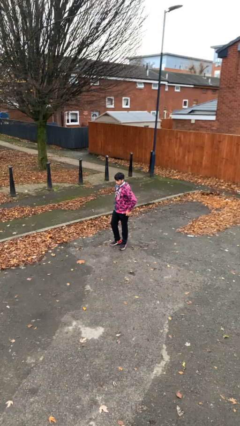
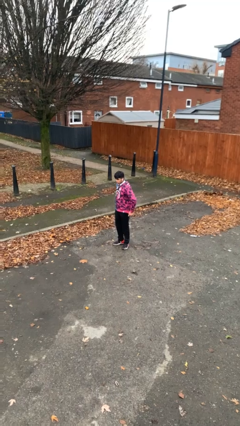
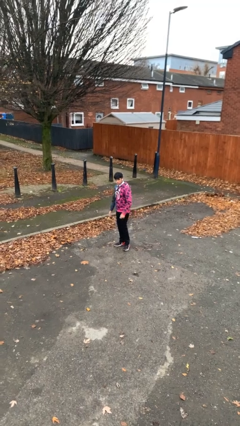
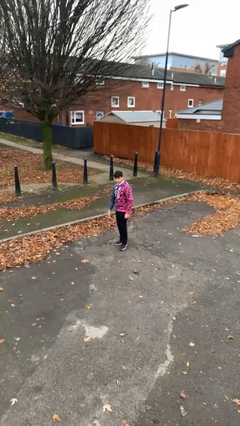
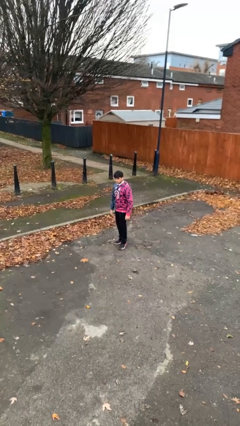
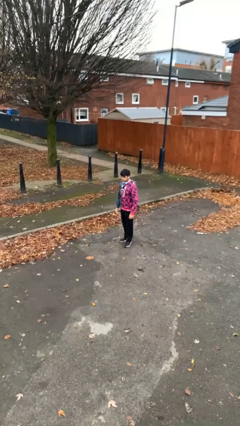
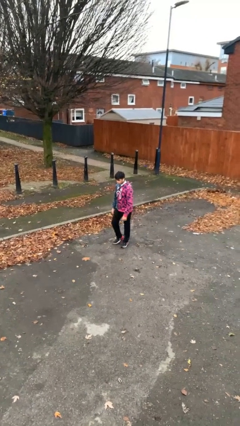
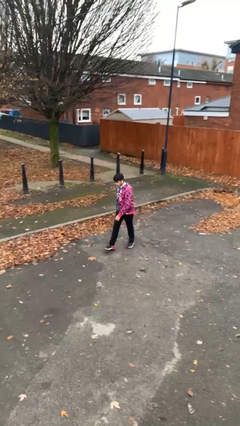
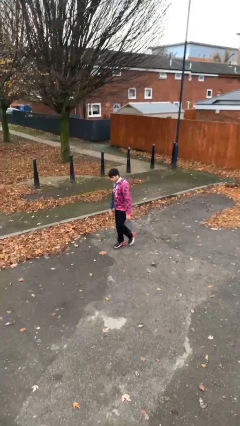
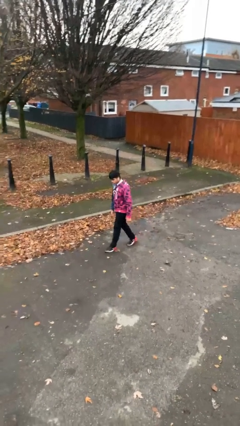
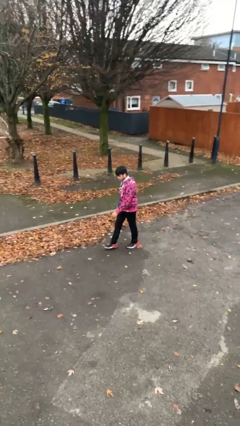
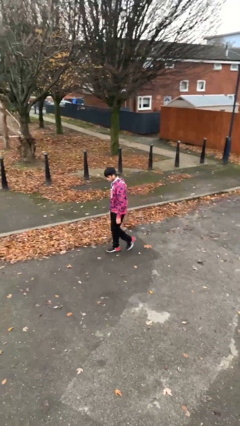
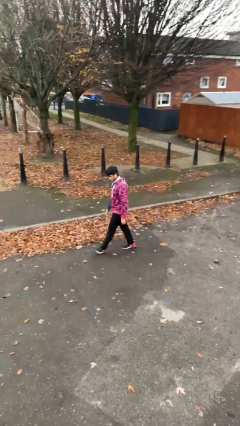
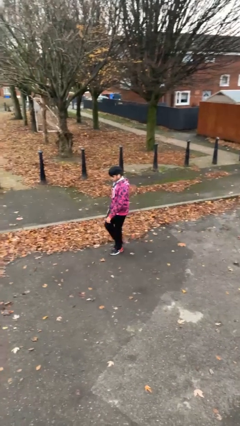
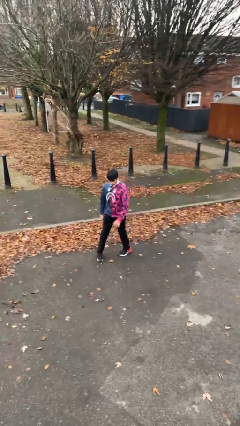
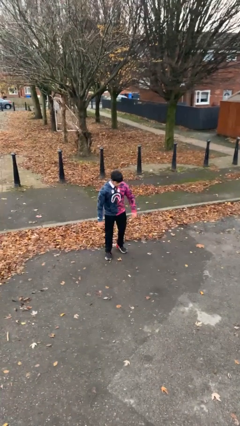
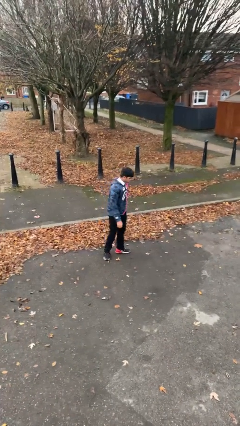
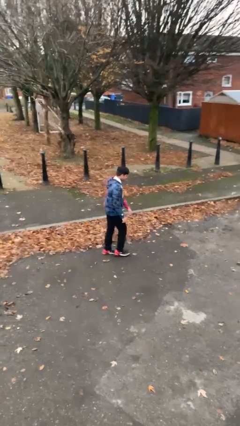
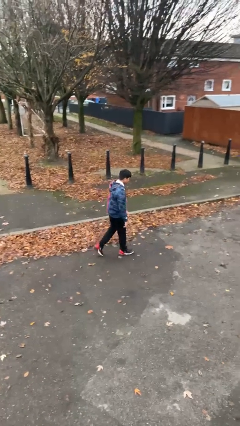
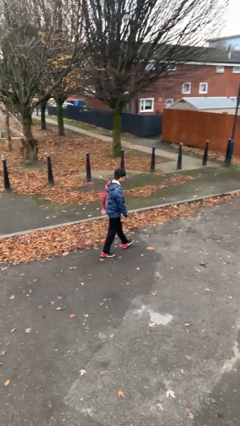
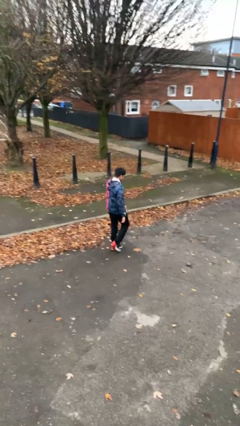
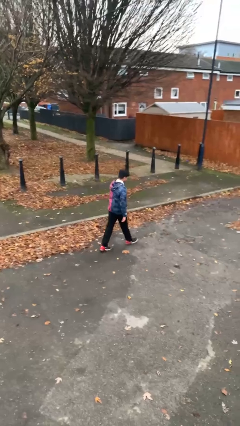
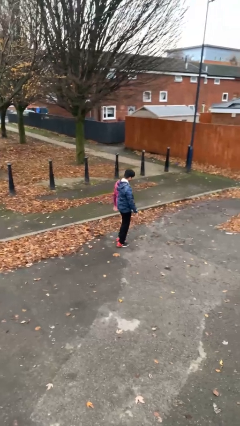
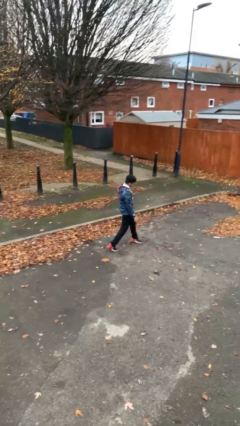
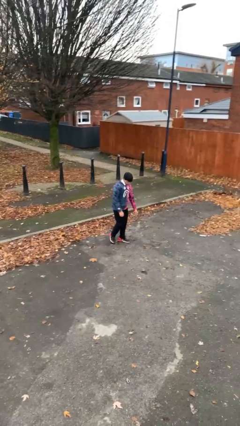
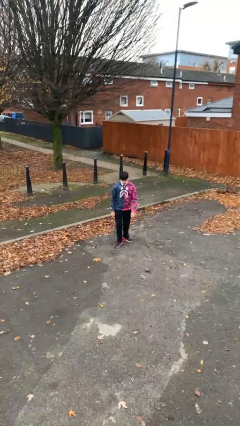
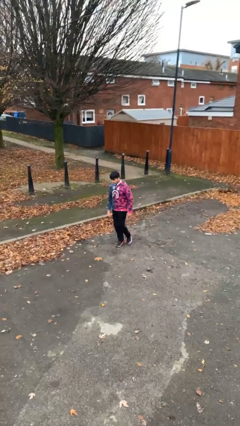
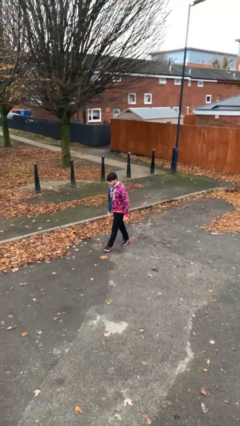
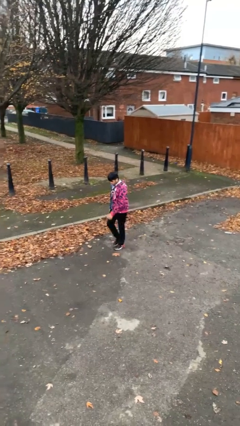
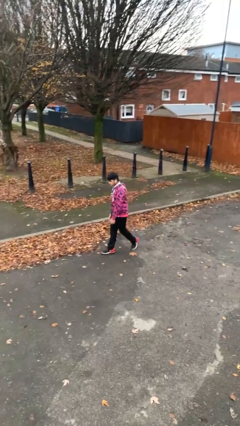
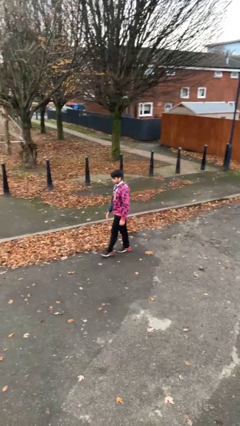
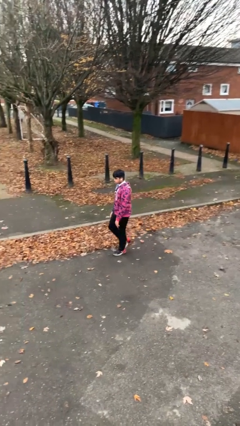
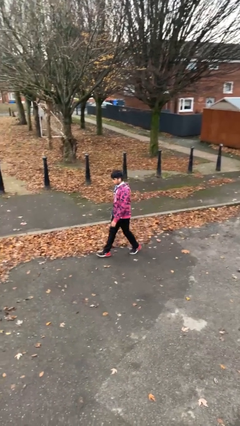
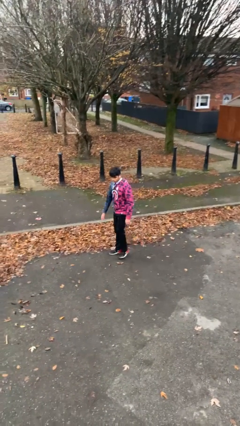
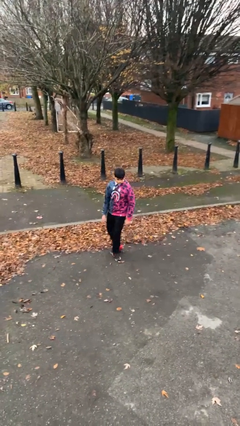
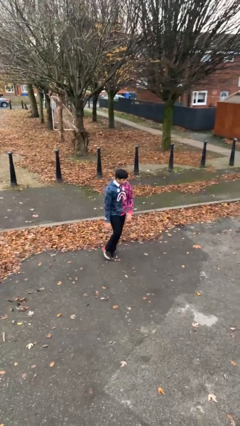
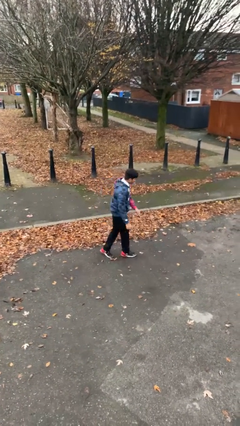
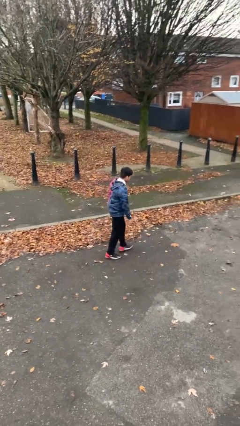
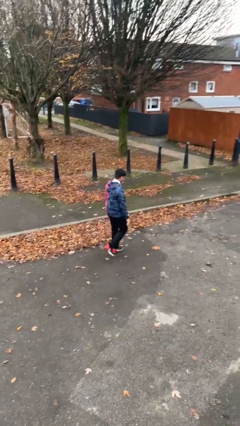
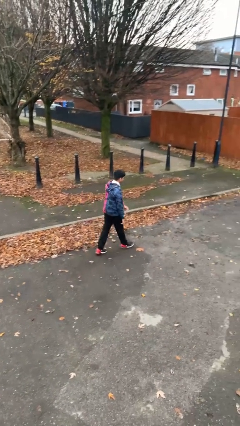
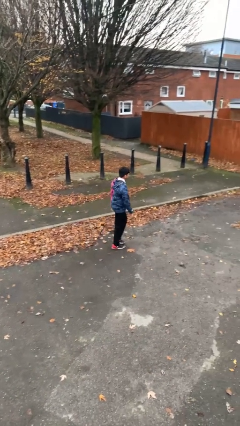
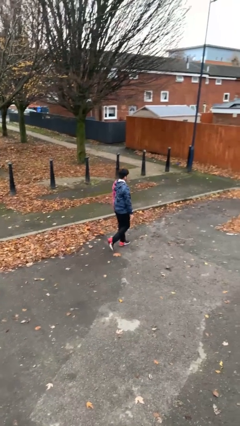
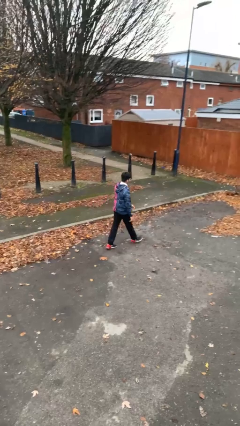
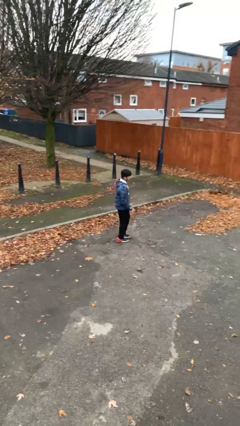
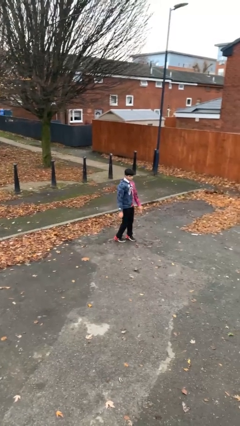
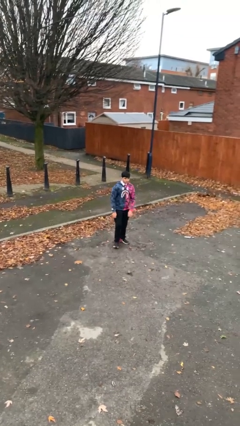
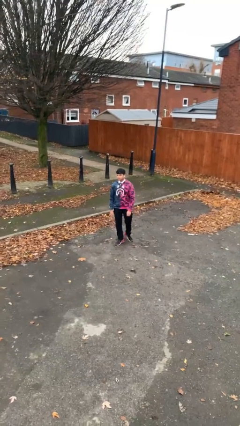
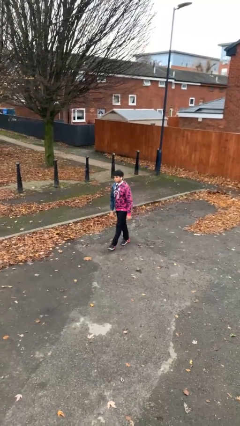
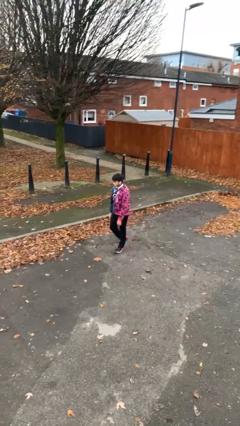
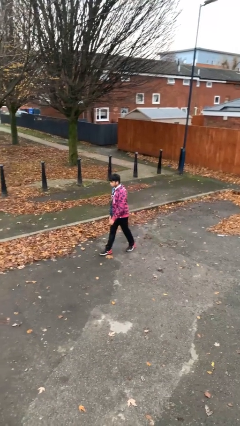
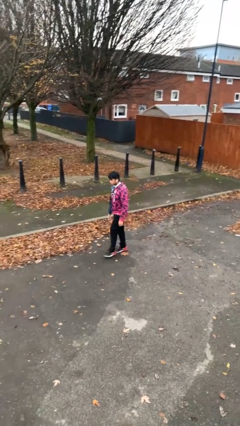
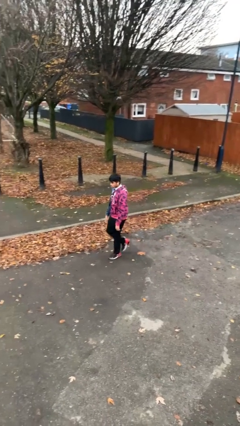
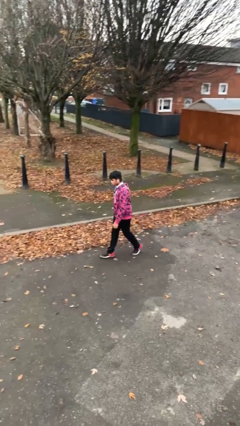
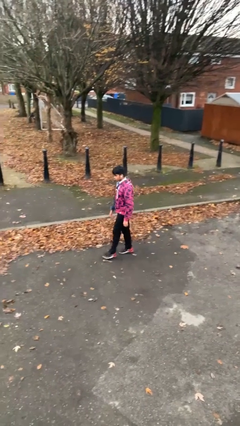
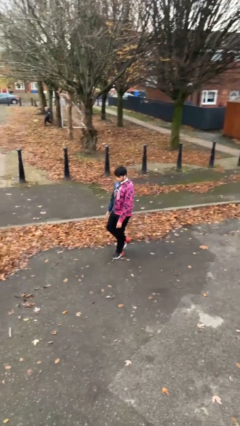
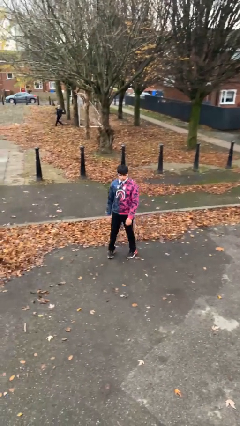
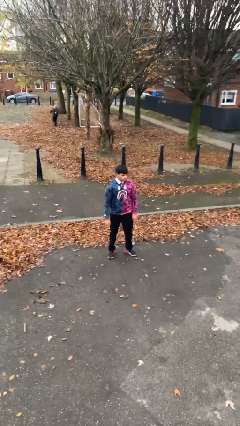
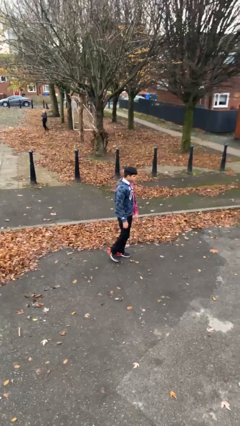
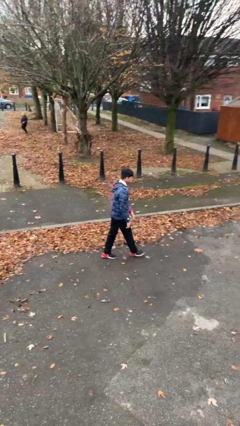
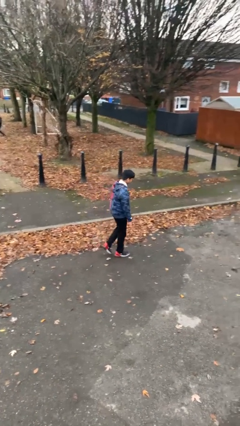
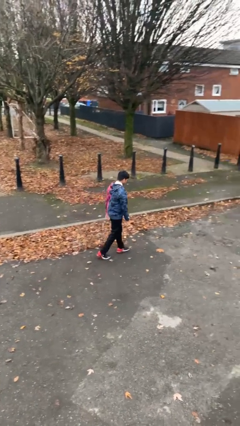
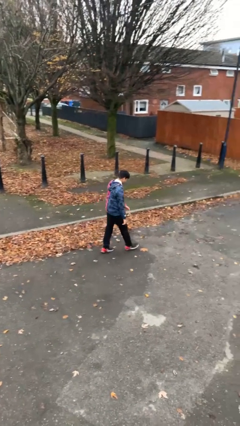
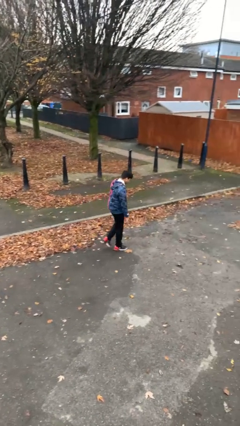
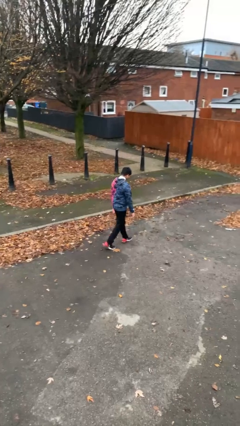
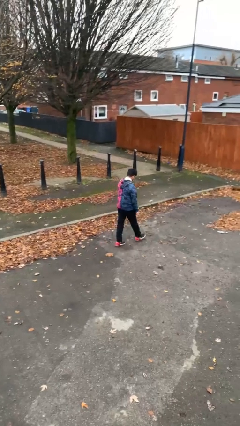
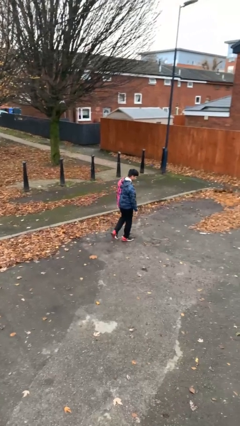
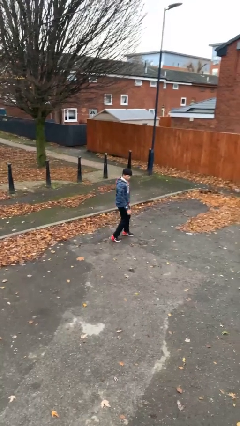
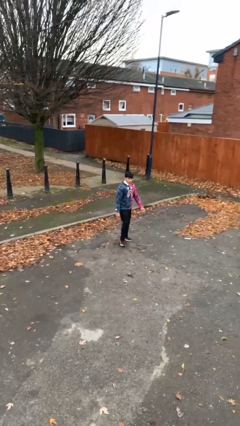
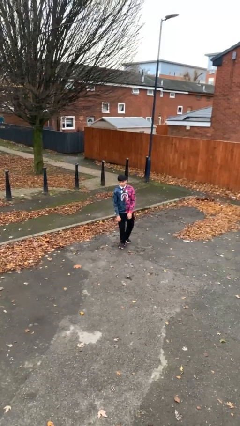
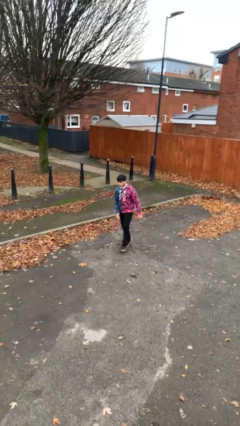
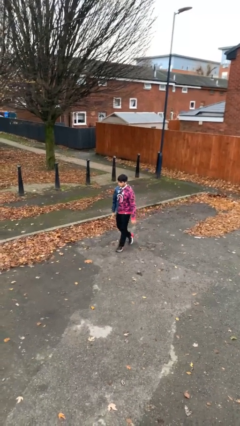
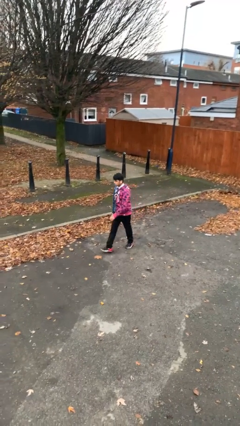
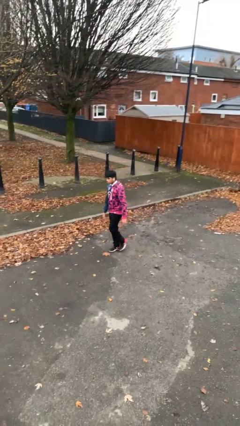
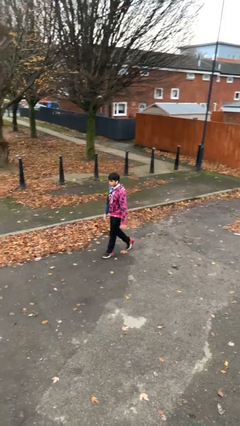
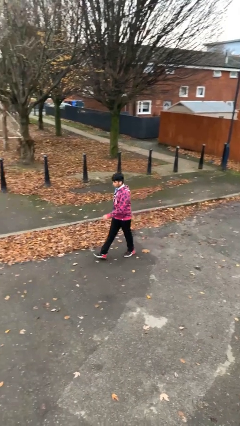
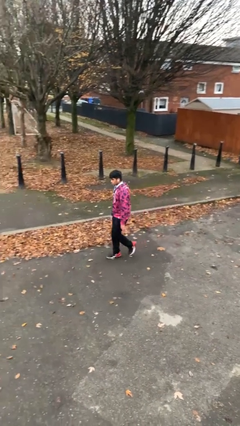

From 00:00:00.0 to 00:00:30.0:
person walks

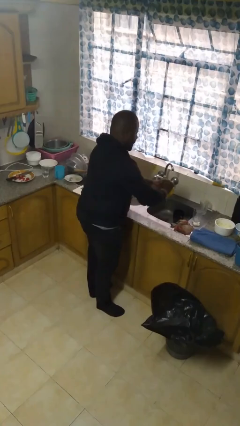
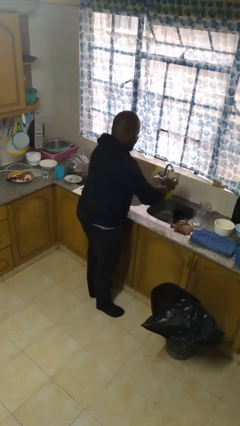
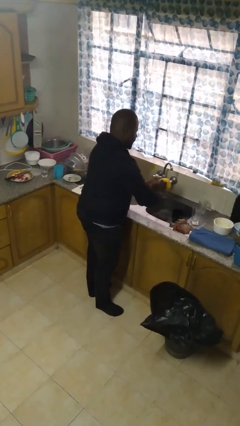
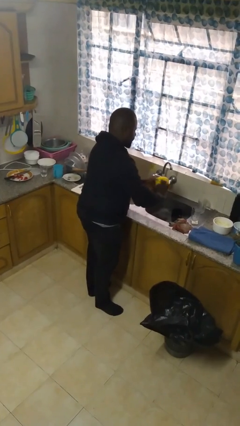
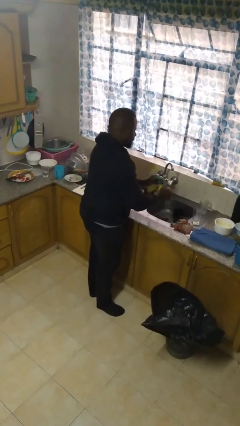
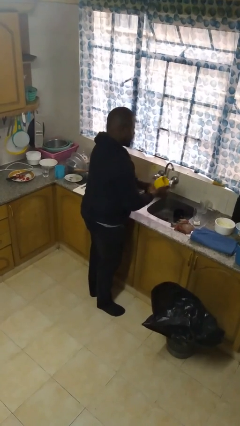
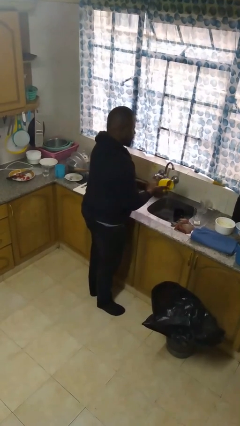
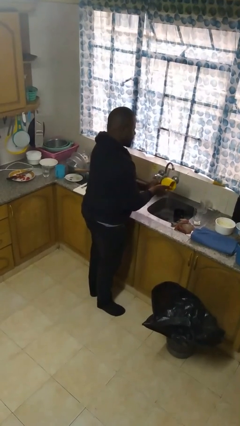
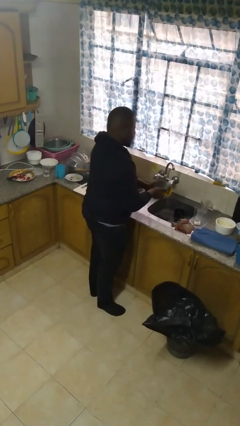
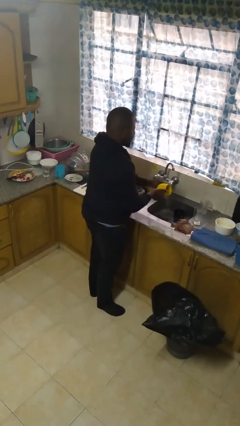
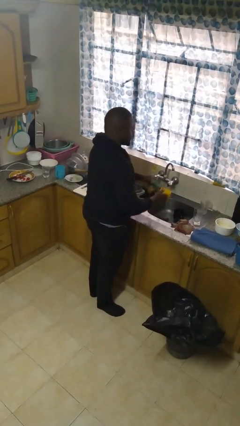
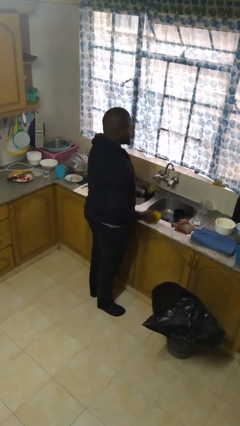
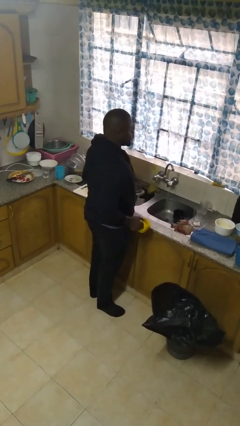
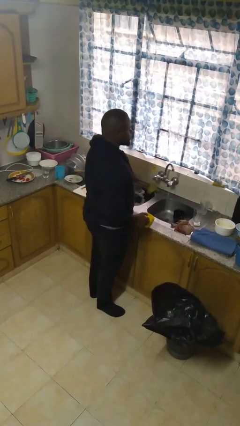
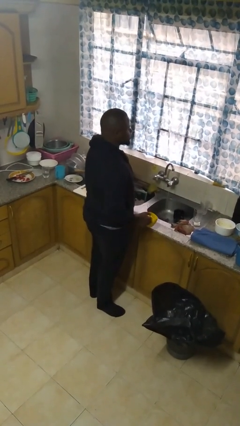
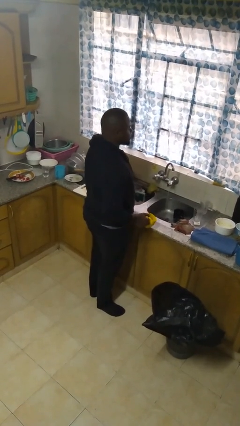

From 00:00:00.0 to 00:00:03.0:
person washes dish

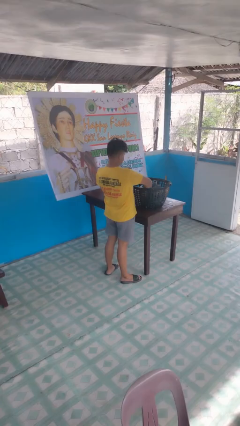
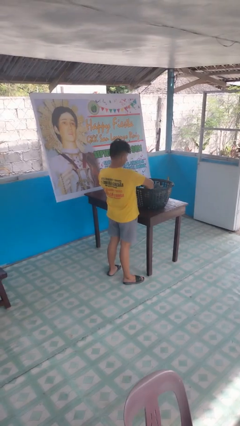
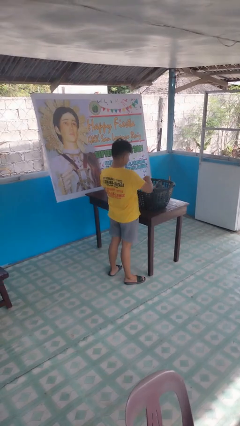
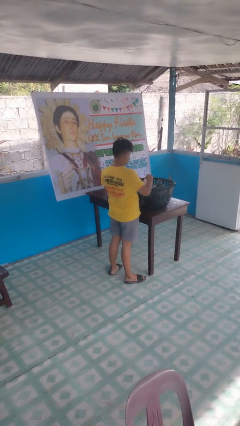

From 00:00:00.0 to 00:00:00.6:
person puts object into basket
